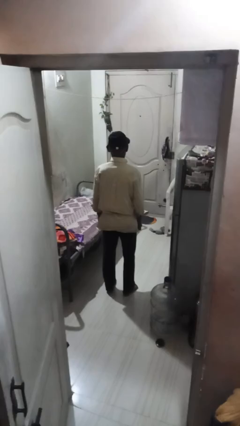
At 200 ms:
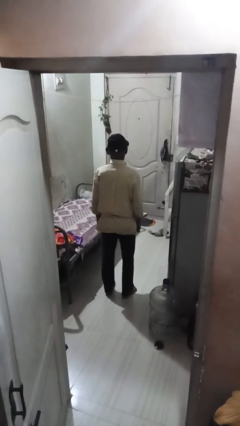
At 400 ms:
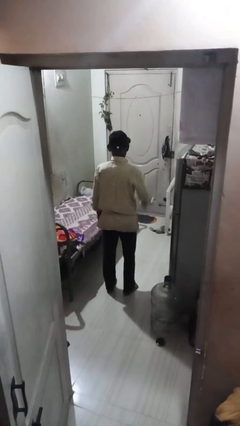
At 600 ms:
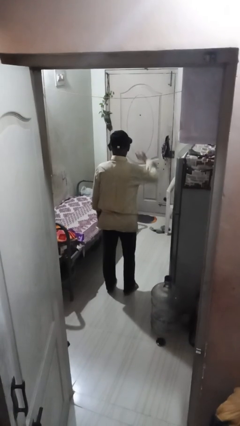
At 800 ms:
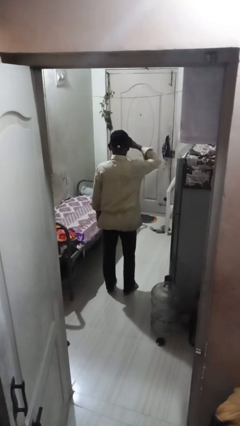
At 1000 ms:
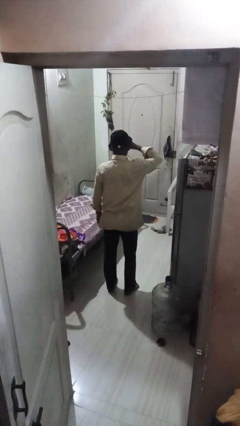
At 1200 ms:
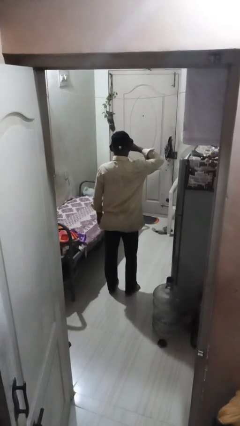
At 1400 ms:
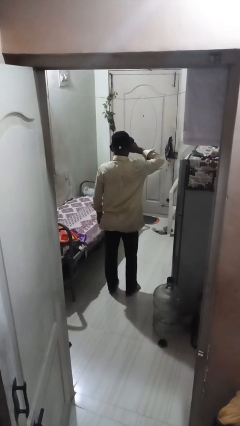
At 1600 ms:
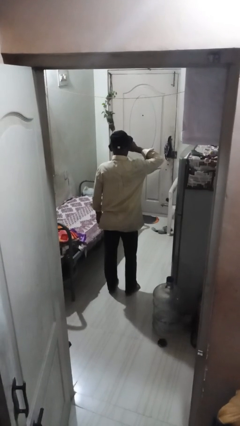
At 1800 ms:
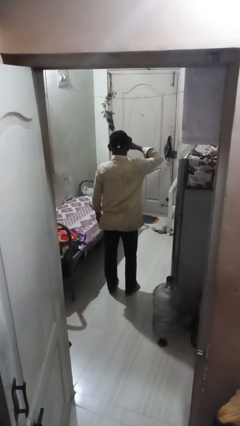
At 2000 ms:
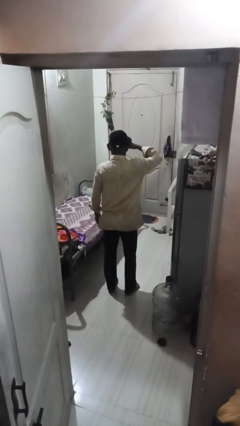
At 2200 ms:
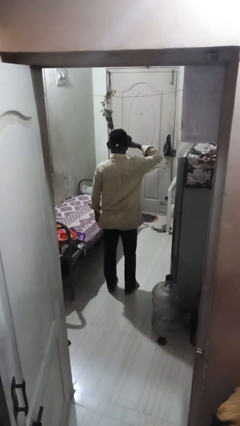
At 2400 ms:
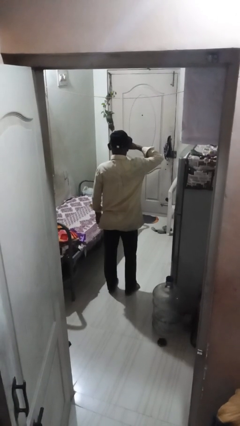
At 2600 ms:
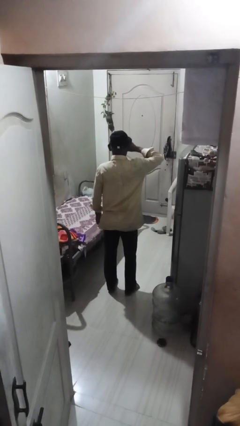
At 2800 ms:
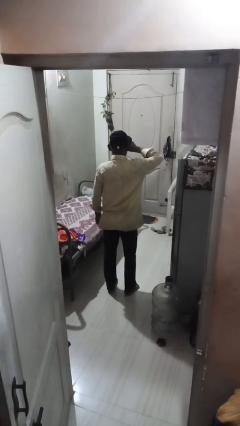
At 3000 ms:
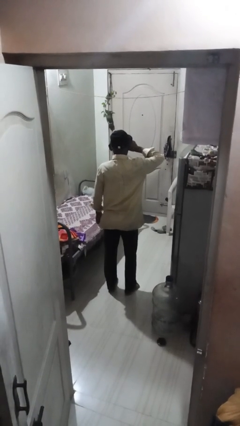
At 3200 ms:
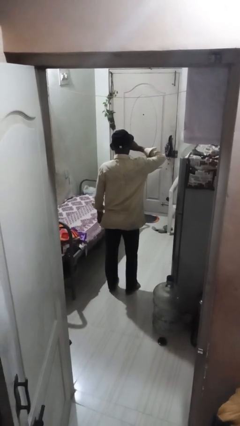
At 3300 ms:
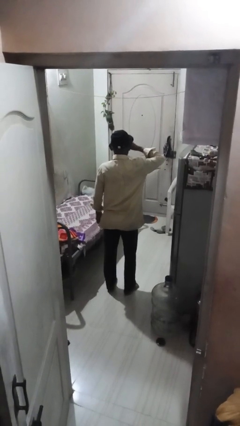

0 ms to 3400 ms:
person rubs eyes

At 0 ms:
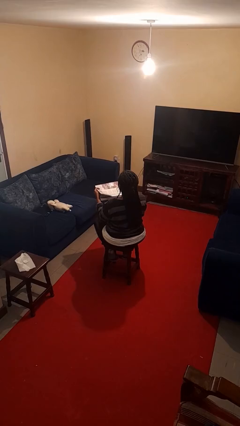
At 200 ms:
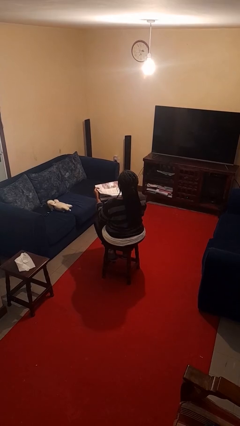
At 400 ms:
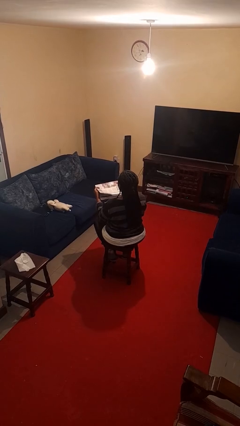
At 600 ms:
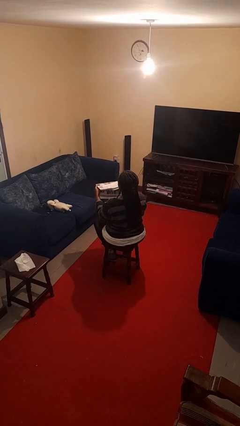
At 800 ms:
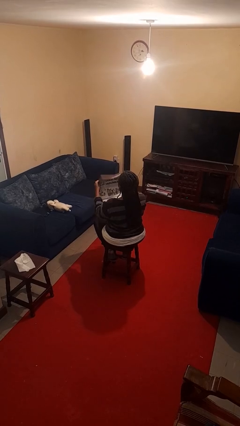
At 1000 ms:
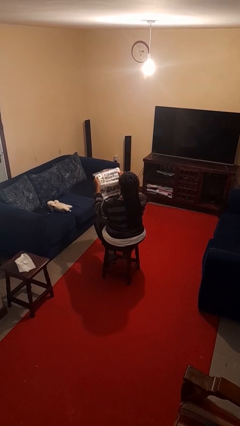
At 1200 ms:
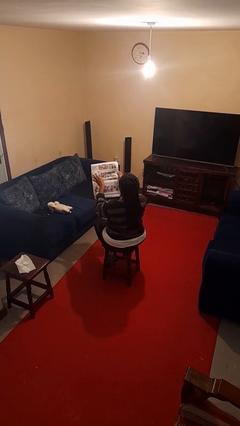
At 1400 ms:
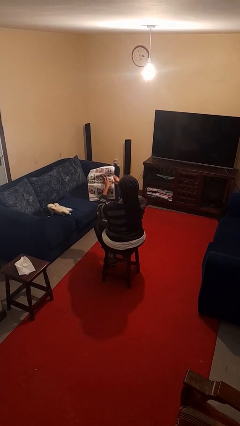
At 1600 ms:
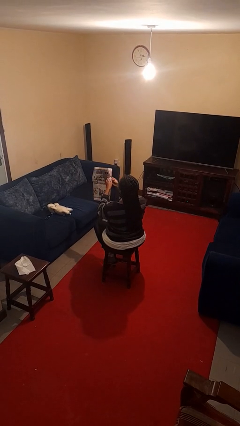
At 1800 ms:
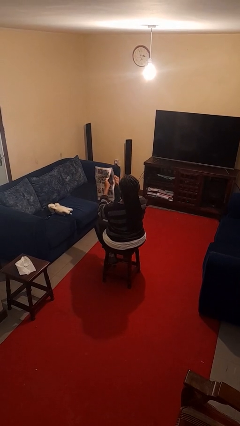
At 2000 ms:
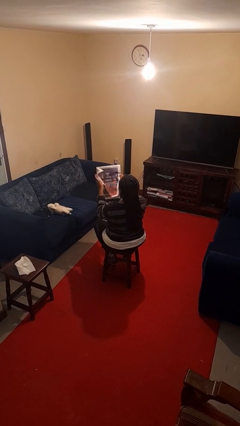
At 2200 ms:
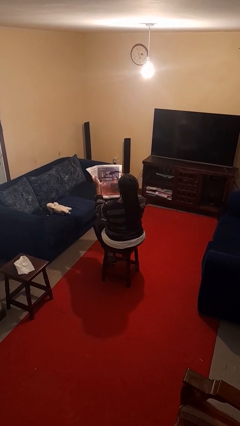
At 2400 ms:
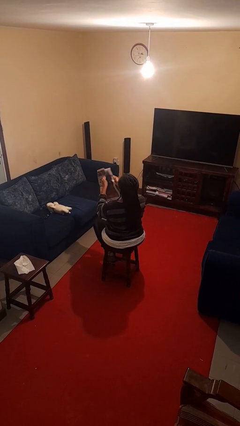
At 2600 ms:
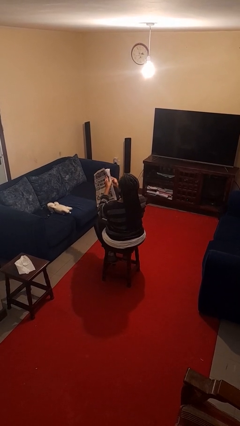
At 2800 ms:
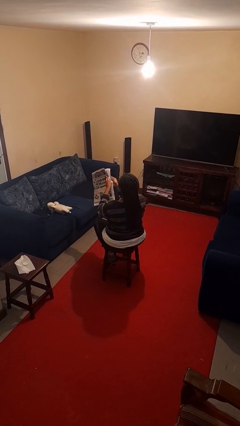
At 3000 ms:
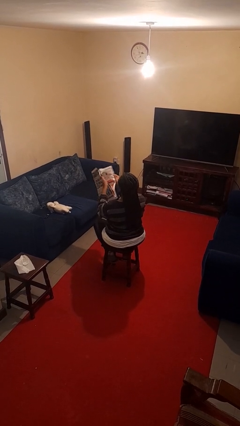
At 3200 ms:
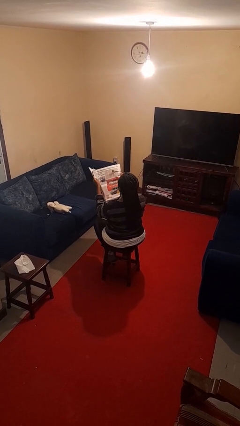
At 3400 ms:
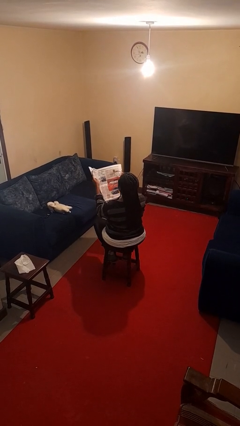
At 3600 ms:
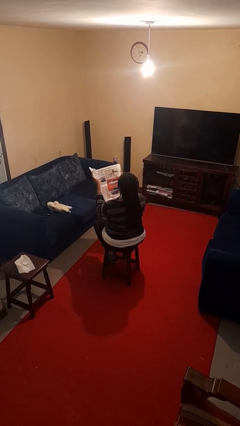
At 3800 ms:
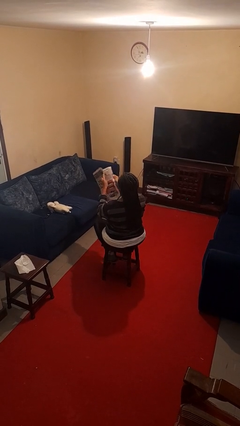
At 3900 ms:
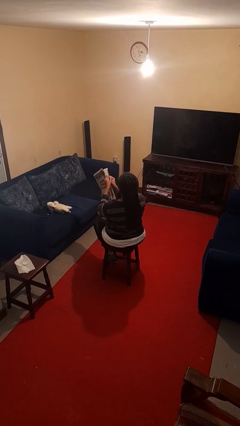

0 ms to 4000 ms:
person reads newspaper

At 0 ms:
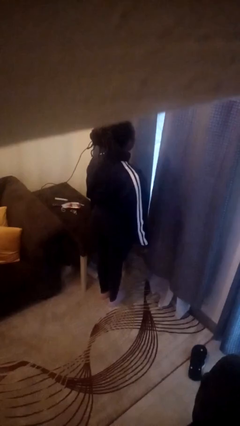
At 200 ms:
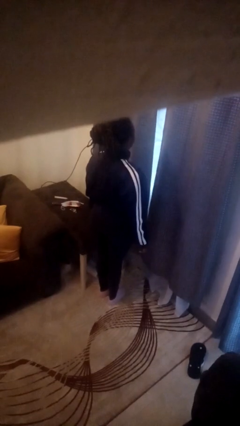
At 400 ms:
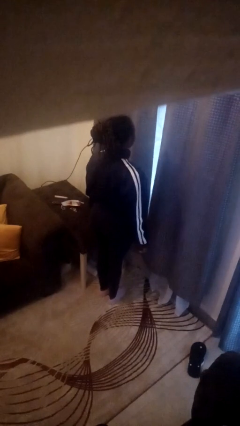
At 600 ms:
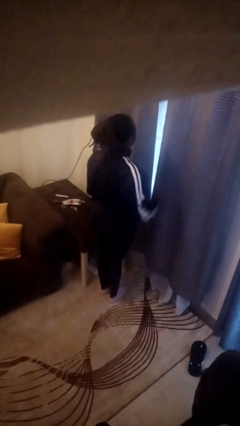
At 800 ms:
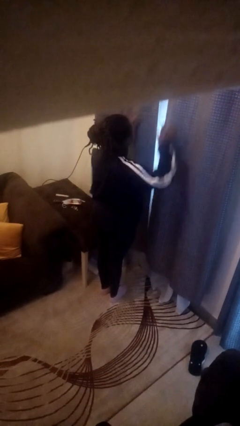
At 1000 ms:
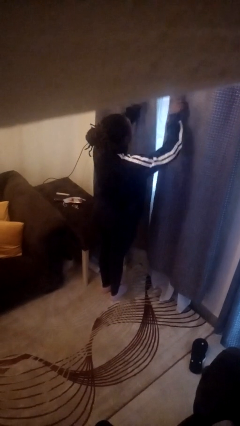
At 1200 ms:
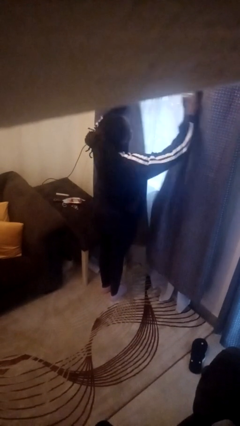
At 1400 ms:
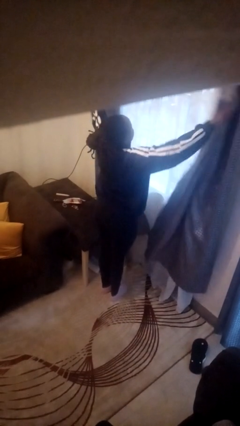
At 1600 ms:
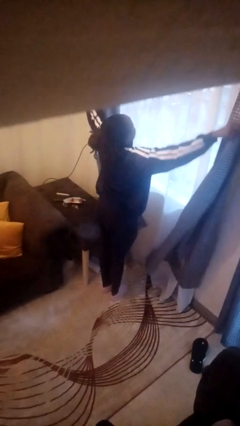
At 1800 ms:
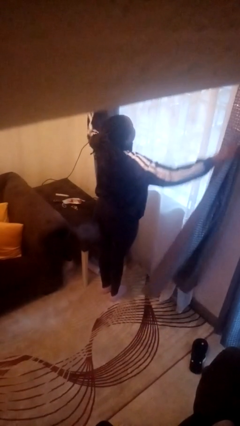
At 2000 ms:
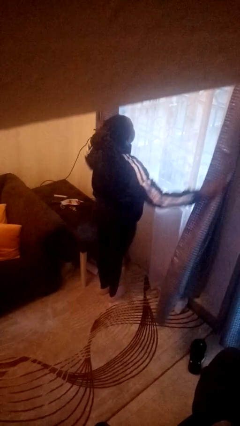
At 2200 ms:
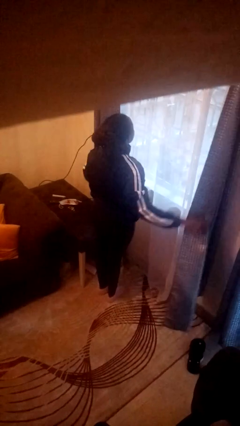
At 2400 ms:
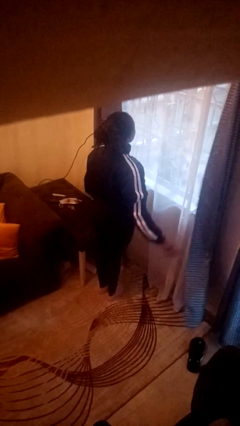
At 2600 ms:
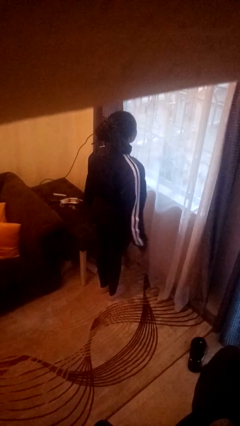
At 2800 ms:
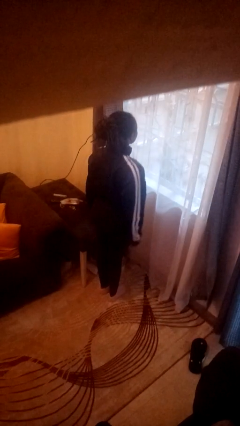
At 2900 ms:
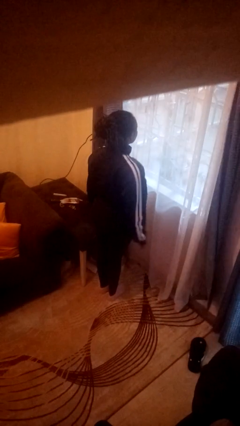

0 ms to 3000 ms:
person opens curtains

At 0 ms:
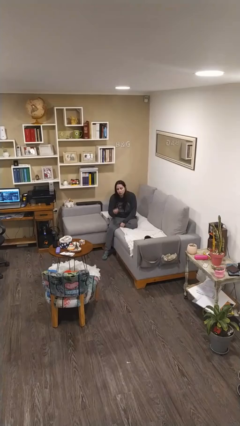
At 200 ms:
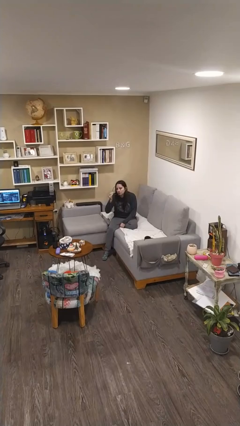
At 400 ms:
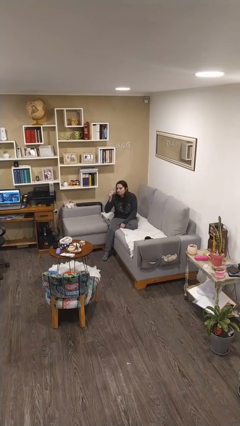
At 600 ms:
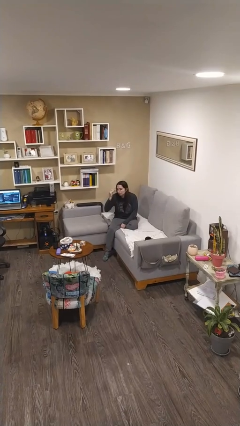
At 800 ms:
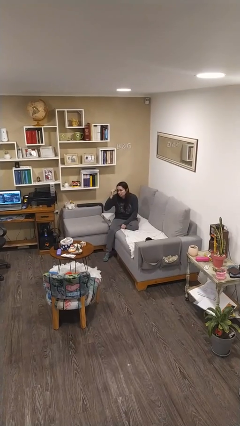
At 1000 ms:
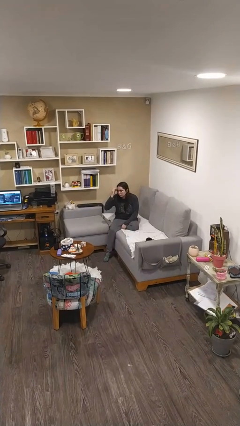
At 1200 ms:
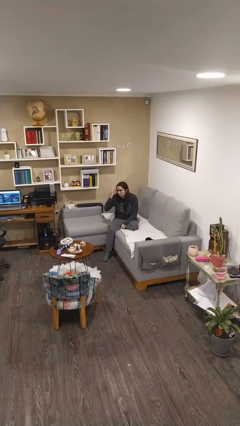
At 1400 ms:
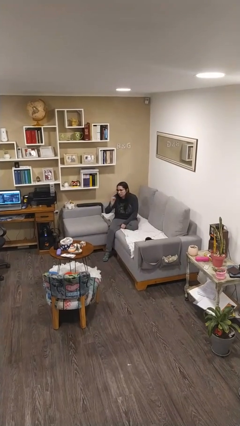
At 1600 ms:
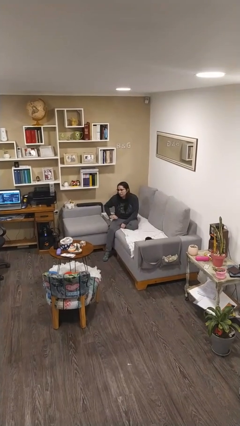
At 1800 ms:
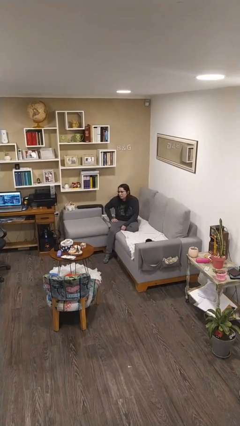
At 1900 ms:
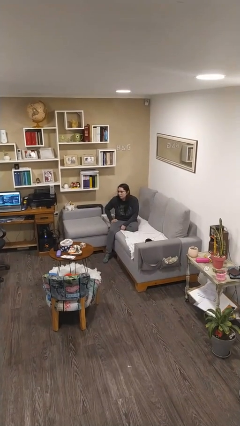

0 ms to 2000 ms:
person puts on glasses

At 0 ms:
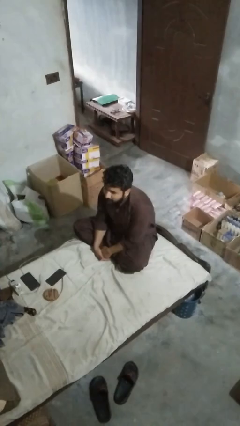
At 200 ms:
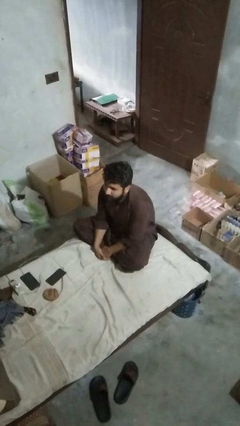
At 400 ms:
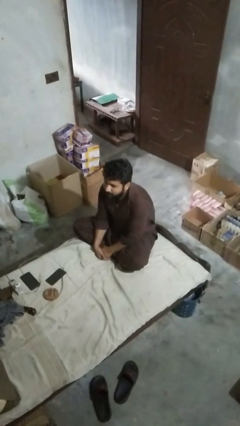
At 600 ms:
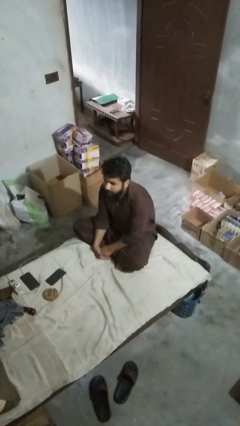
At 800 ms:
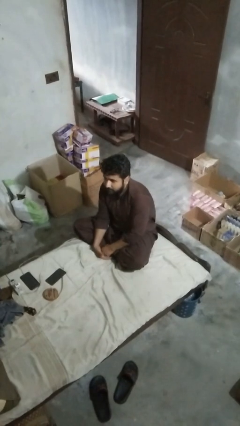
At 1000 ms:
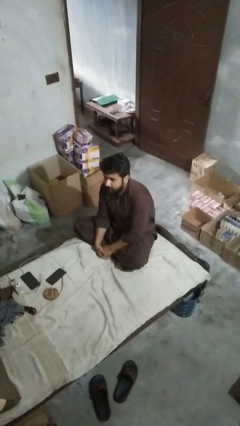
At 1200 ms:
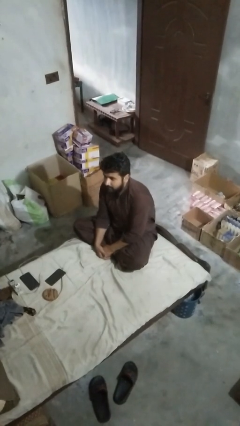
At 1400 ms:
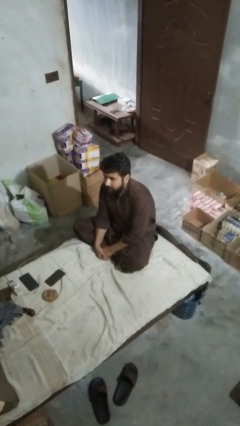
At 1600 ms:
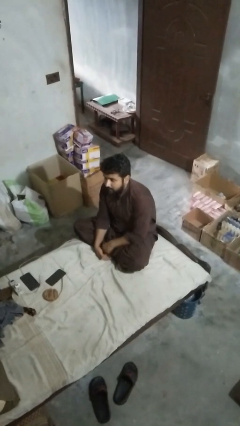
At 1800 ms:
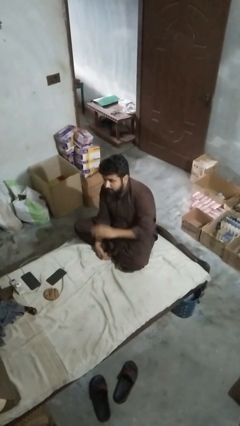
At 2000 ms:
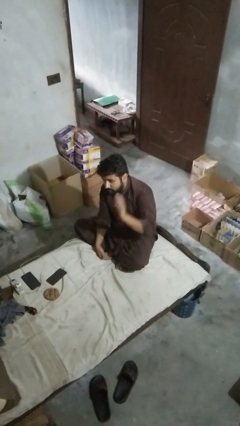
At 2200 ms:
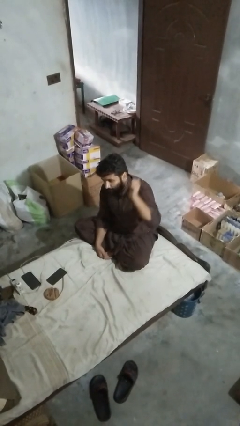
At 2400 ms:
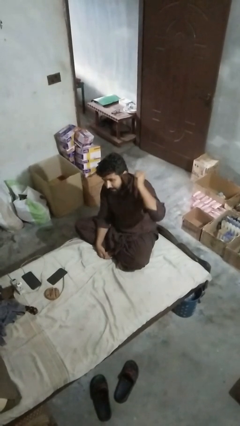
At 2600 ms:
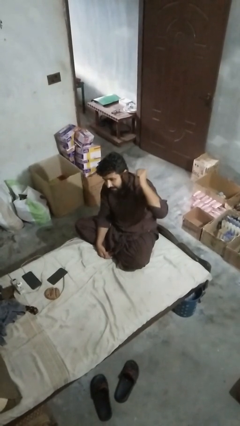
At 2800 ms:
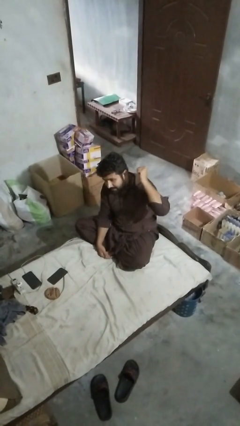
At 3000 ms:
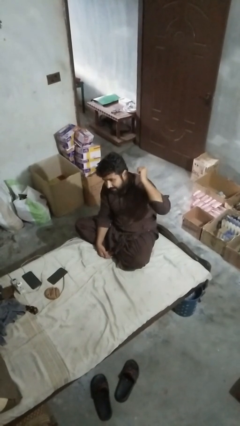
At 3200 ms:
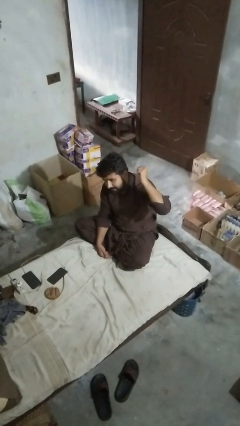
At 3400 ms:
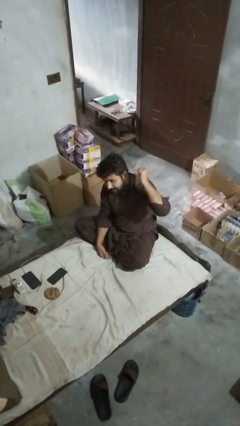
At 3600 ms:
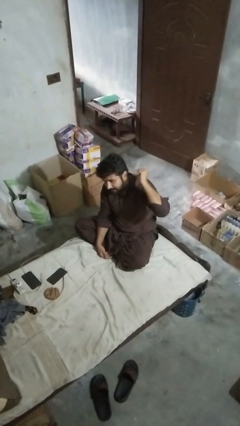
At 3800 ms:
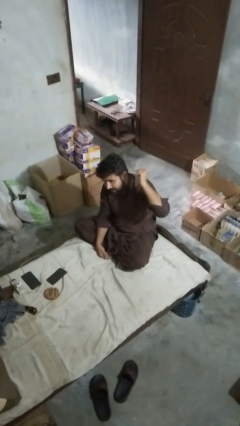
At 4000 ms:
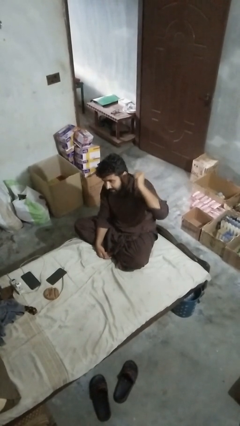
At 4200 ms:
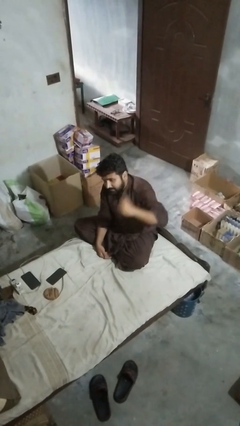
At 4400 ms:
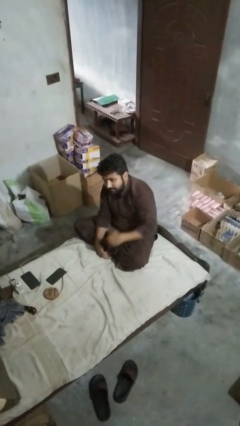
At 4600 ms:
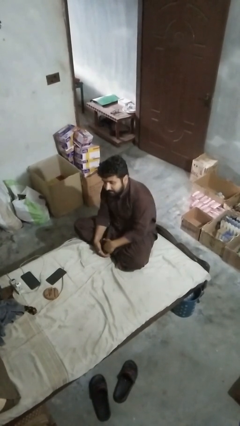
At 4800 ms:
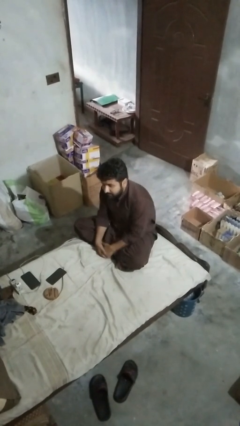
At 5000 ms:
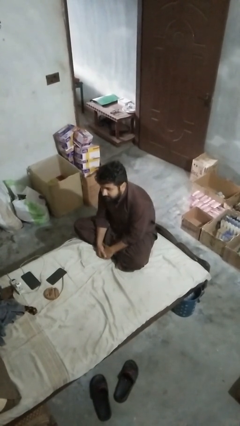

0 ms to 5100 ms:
person gestures behind me

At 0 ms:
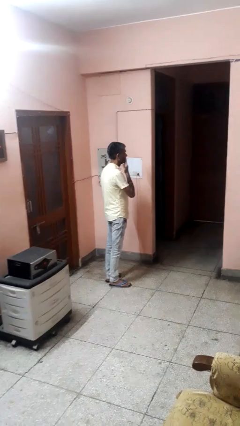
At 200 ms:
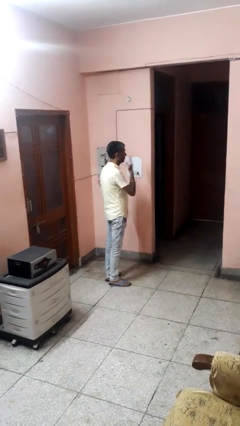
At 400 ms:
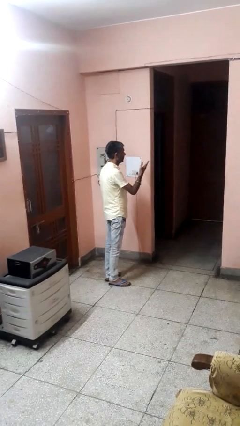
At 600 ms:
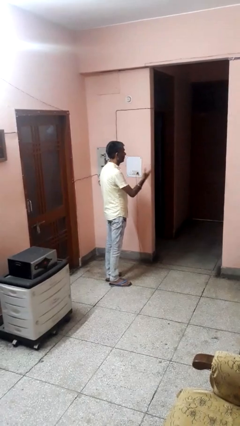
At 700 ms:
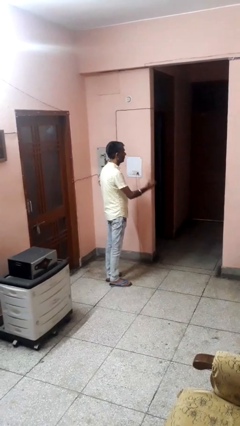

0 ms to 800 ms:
person gestures blow kiss
